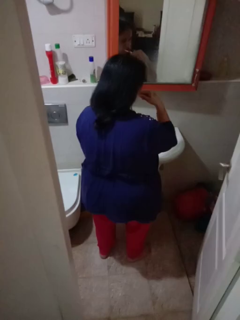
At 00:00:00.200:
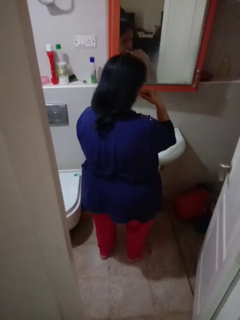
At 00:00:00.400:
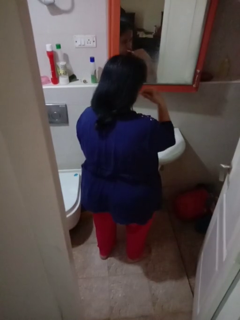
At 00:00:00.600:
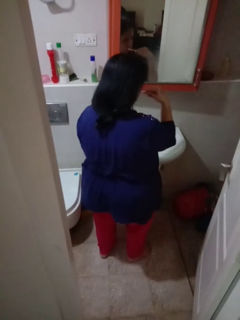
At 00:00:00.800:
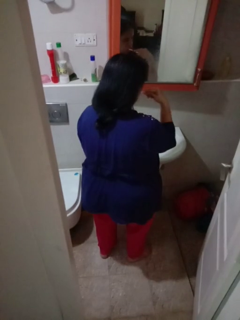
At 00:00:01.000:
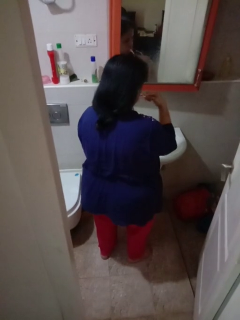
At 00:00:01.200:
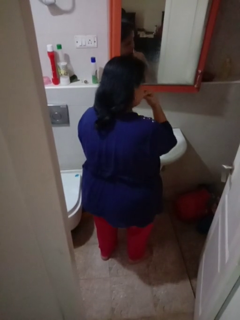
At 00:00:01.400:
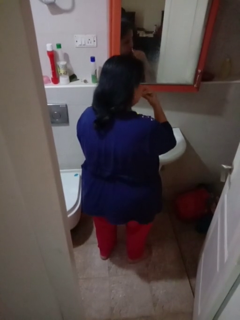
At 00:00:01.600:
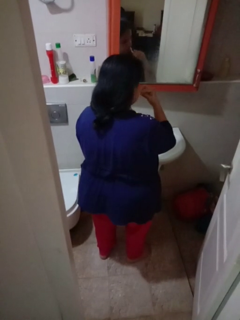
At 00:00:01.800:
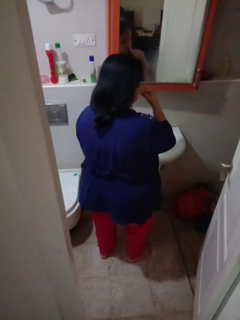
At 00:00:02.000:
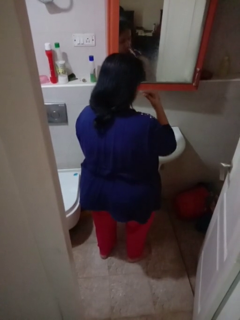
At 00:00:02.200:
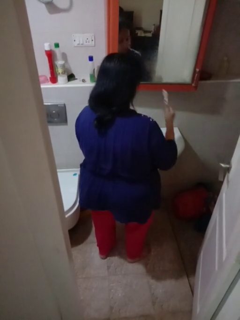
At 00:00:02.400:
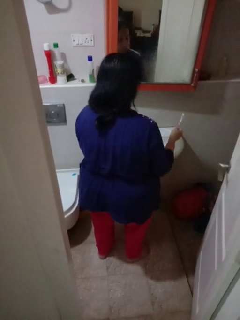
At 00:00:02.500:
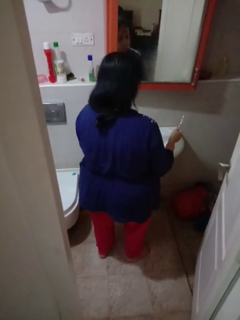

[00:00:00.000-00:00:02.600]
person brushes teeth

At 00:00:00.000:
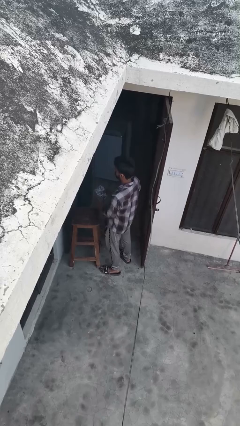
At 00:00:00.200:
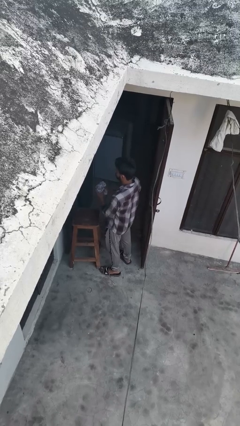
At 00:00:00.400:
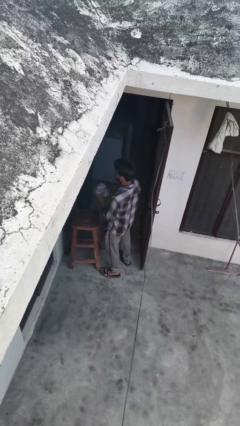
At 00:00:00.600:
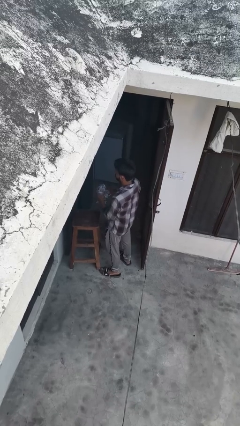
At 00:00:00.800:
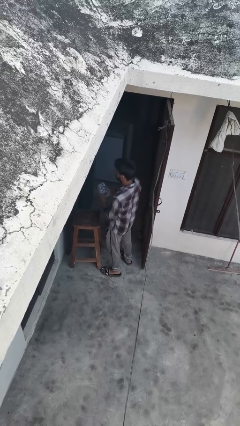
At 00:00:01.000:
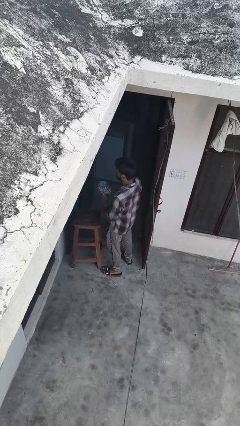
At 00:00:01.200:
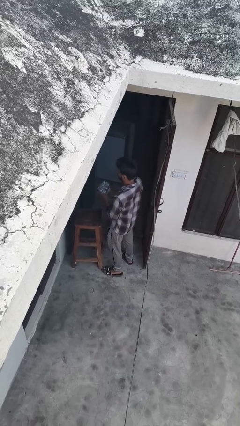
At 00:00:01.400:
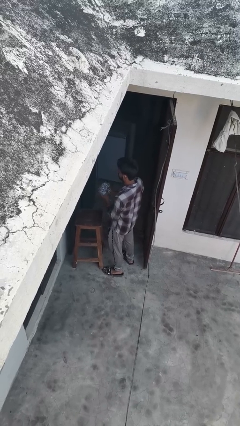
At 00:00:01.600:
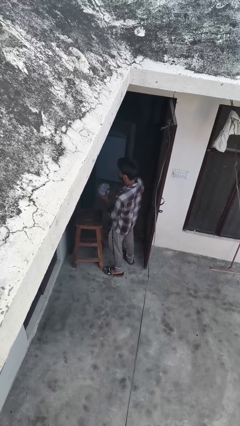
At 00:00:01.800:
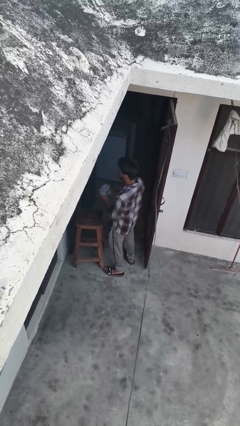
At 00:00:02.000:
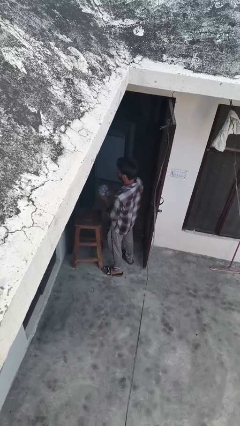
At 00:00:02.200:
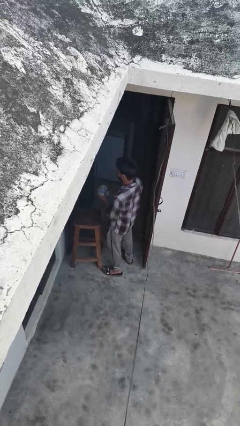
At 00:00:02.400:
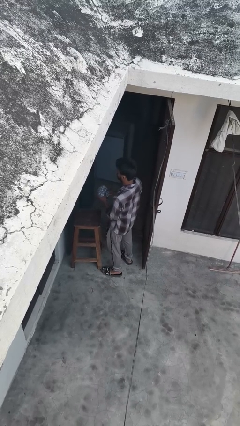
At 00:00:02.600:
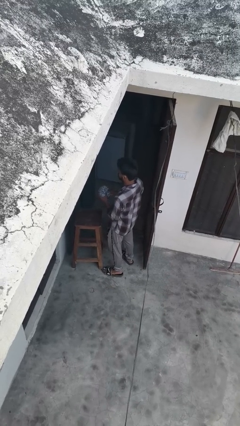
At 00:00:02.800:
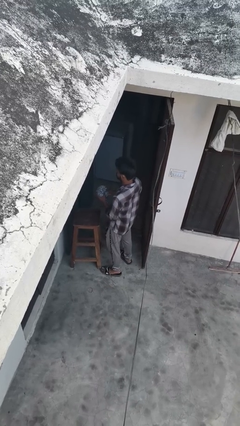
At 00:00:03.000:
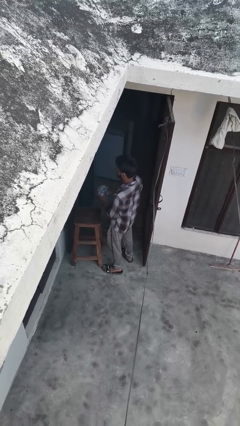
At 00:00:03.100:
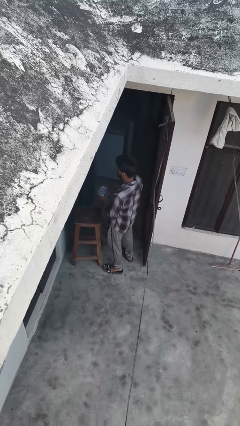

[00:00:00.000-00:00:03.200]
person squeezes object

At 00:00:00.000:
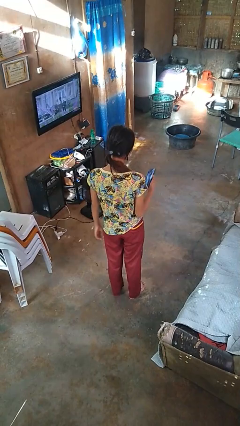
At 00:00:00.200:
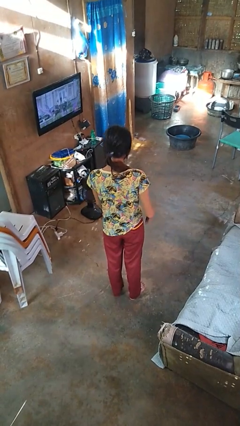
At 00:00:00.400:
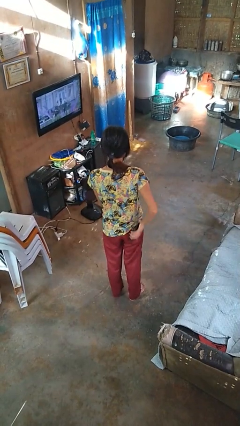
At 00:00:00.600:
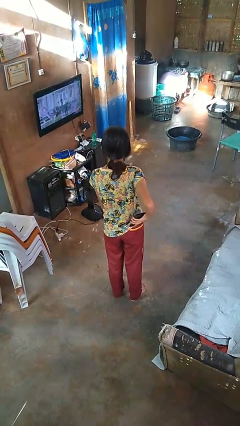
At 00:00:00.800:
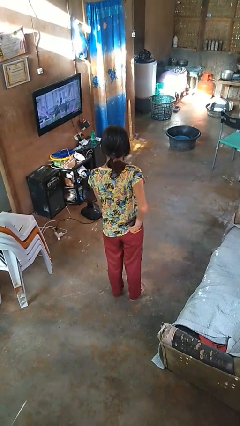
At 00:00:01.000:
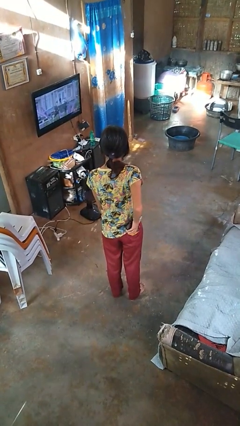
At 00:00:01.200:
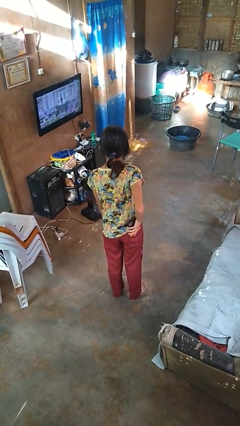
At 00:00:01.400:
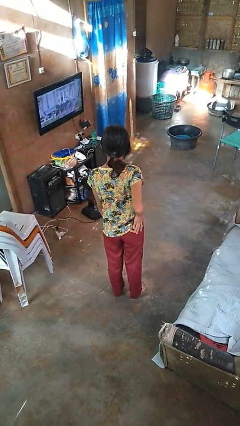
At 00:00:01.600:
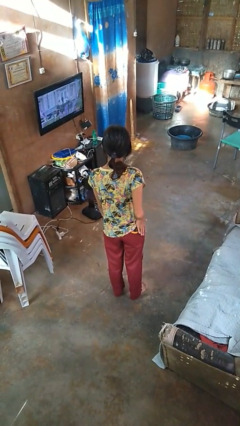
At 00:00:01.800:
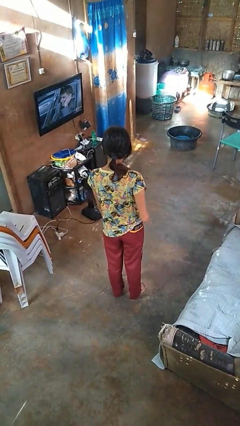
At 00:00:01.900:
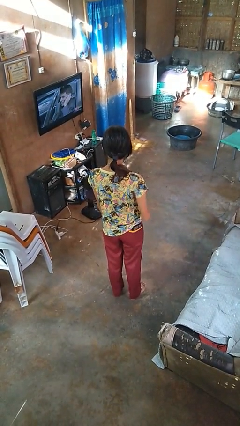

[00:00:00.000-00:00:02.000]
person puts phone into pocket

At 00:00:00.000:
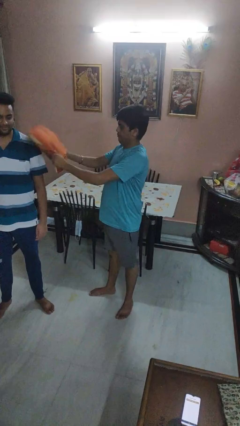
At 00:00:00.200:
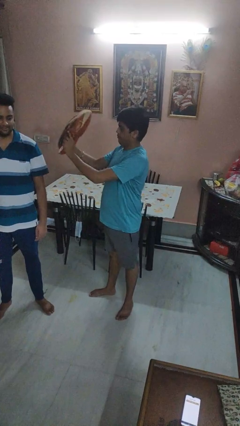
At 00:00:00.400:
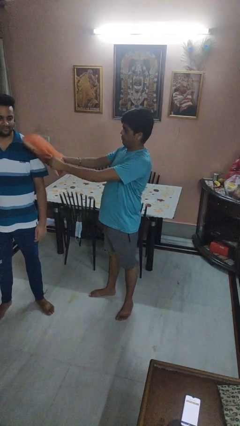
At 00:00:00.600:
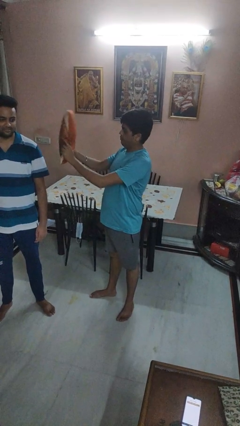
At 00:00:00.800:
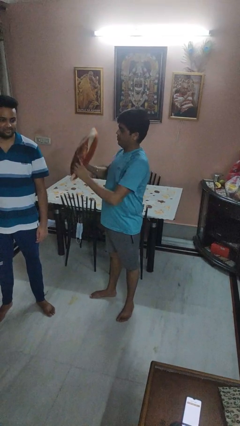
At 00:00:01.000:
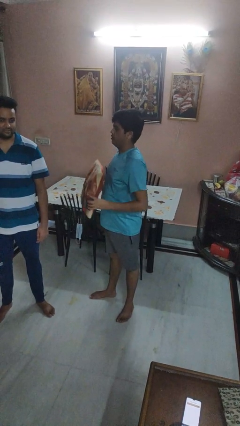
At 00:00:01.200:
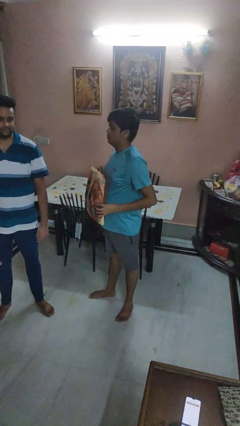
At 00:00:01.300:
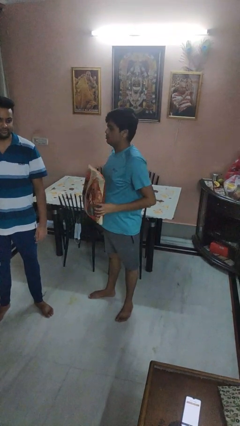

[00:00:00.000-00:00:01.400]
person hits person with pillow

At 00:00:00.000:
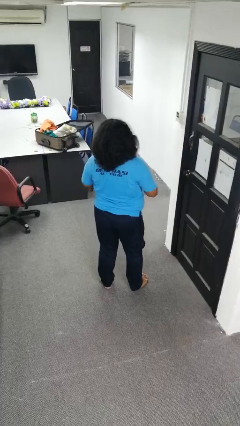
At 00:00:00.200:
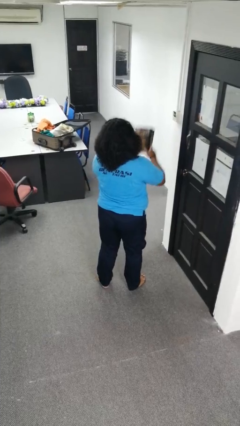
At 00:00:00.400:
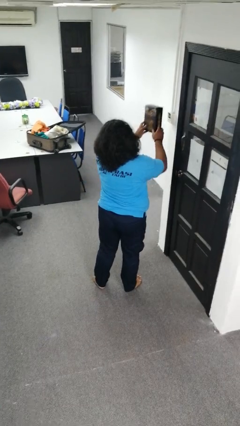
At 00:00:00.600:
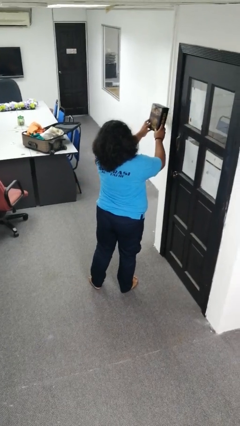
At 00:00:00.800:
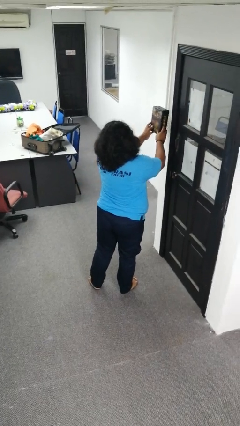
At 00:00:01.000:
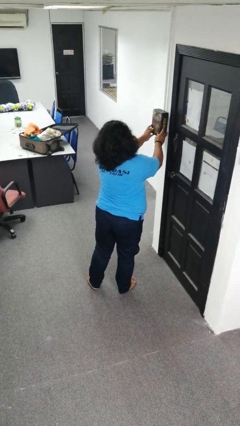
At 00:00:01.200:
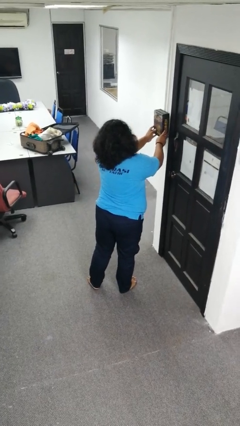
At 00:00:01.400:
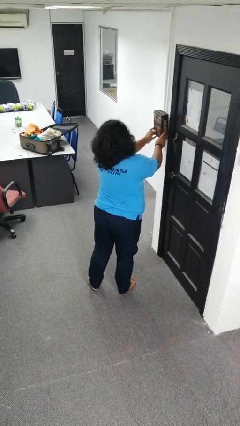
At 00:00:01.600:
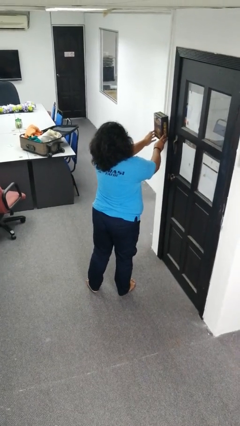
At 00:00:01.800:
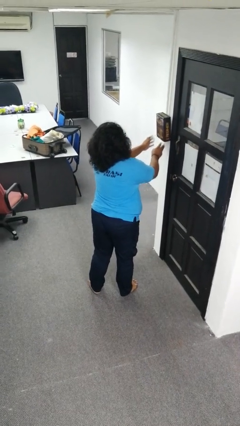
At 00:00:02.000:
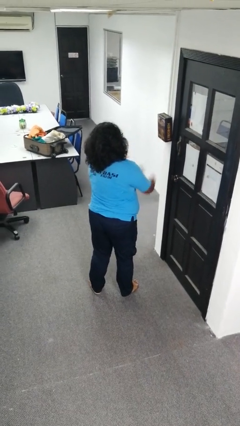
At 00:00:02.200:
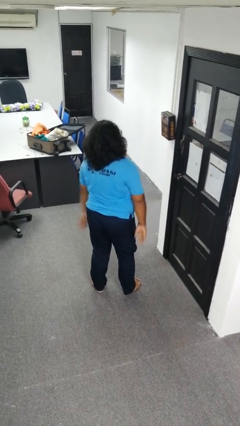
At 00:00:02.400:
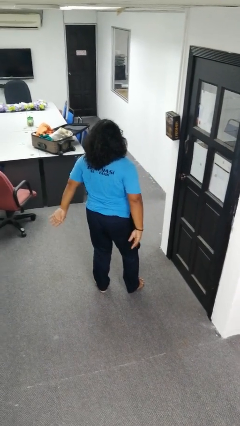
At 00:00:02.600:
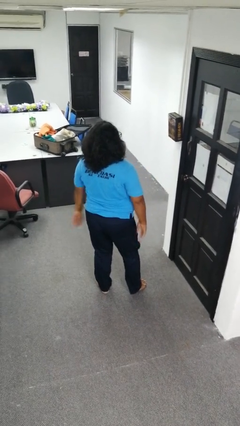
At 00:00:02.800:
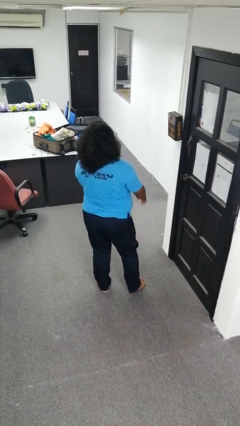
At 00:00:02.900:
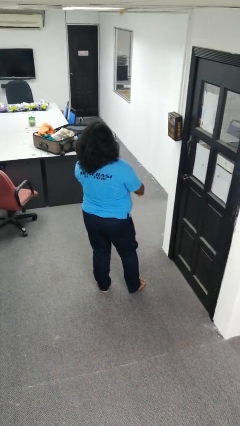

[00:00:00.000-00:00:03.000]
person puts up picture frame

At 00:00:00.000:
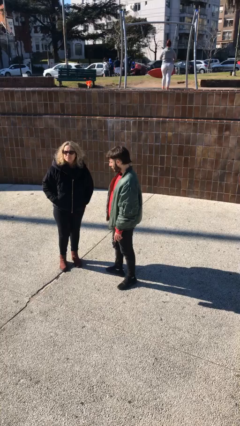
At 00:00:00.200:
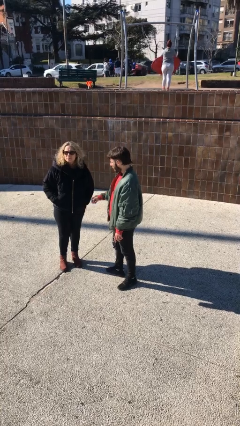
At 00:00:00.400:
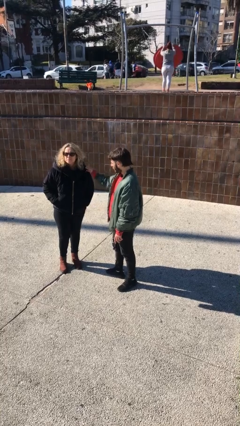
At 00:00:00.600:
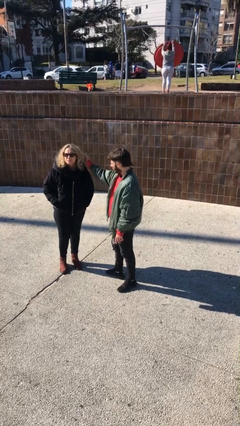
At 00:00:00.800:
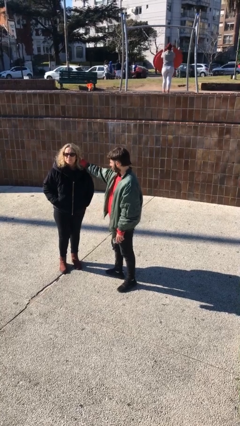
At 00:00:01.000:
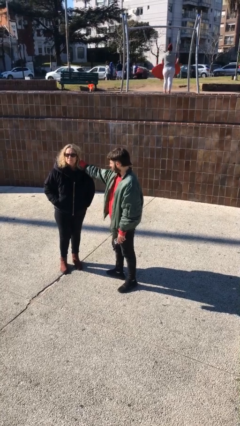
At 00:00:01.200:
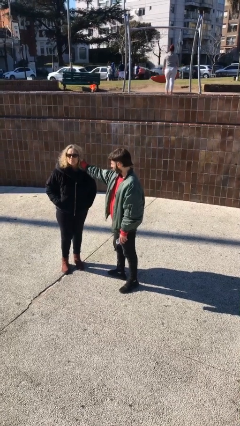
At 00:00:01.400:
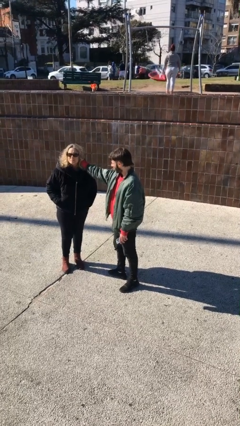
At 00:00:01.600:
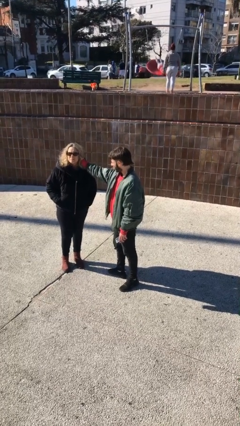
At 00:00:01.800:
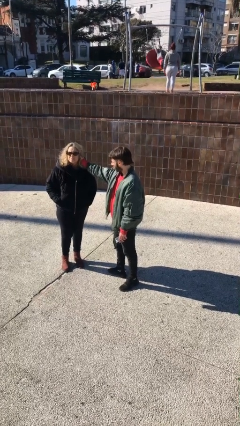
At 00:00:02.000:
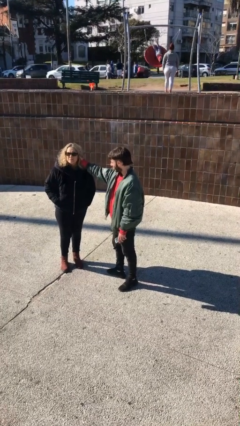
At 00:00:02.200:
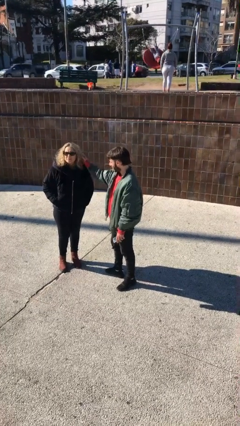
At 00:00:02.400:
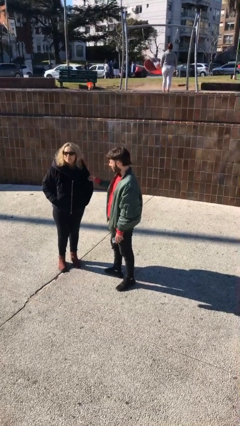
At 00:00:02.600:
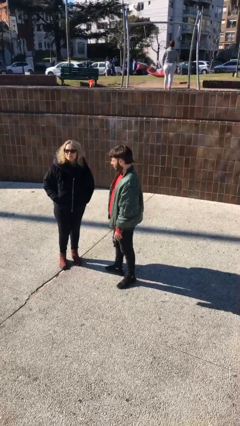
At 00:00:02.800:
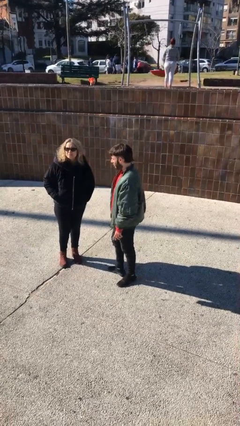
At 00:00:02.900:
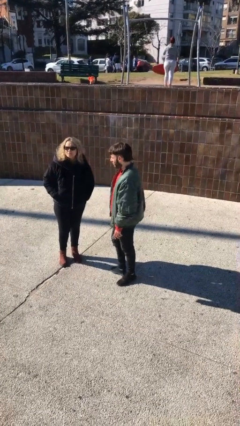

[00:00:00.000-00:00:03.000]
person touches face of person

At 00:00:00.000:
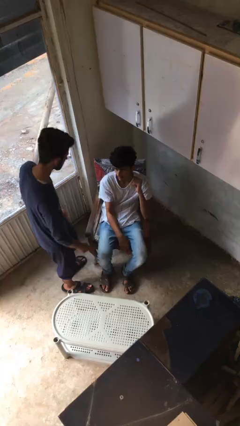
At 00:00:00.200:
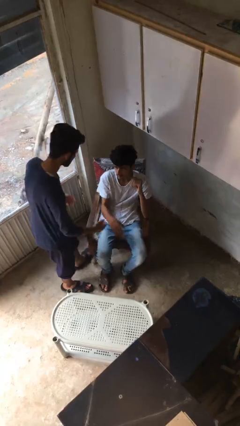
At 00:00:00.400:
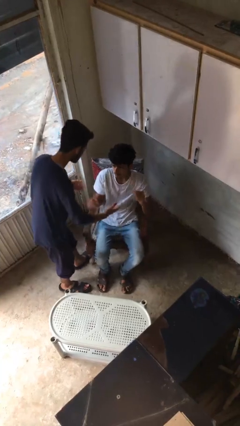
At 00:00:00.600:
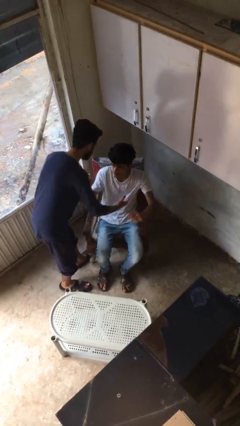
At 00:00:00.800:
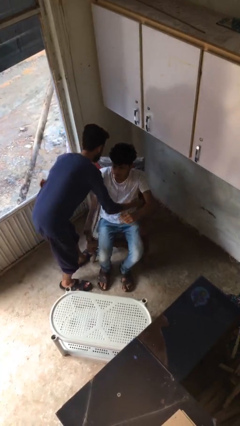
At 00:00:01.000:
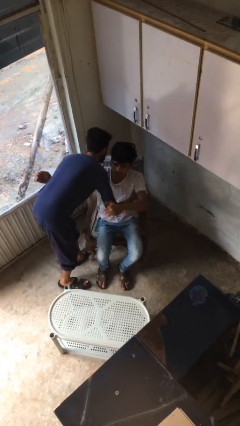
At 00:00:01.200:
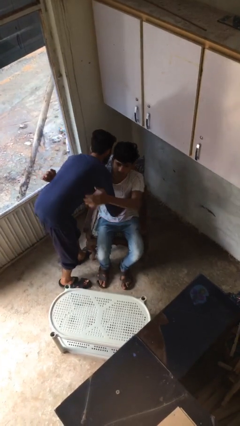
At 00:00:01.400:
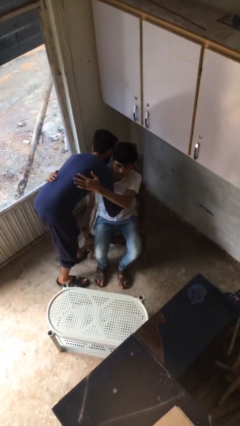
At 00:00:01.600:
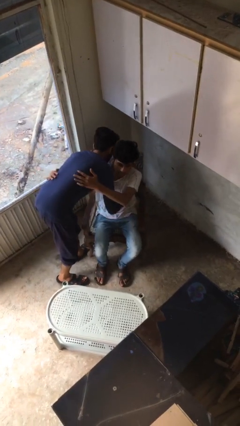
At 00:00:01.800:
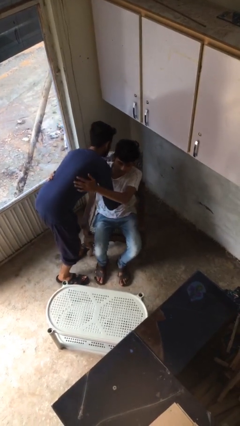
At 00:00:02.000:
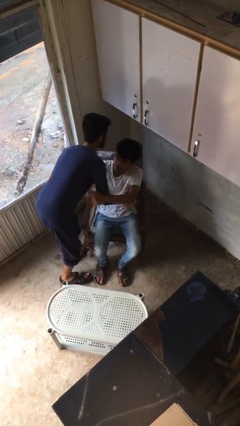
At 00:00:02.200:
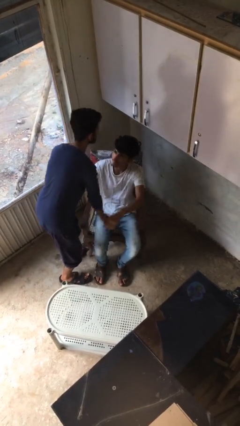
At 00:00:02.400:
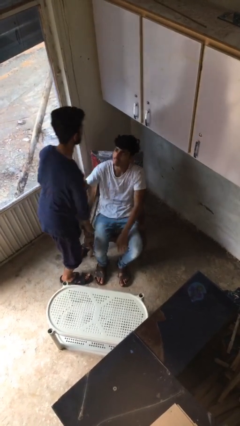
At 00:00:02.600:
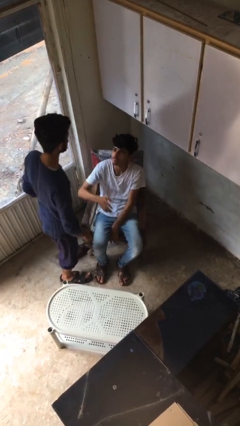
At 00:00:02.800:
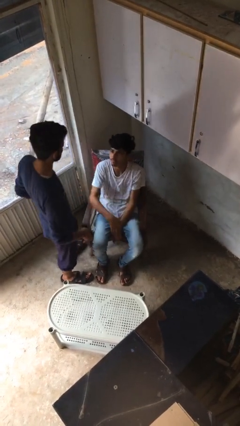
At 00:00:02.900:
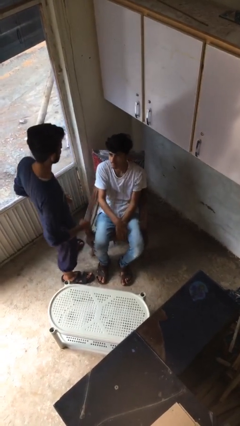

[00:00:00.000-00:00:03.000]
person embraces person
